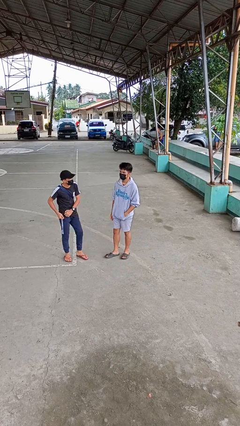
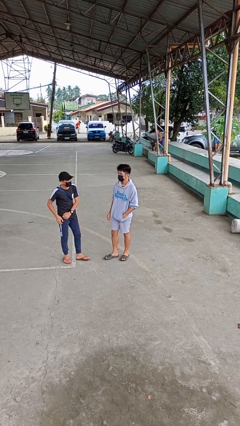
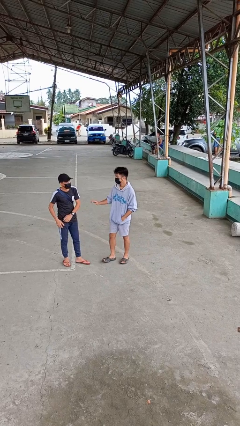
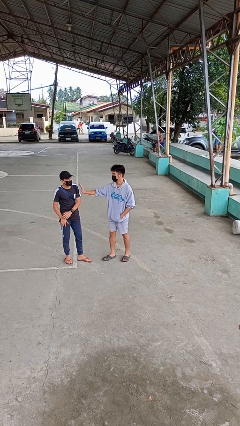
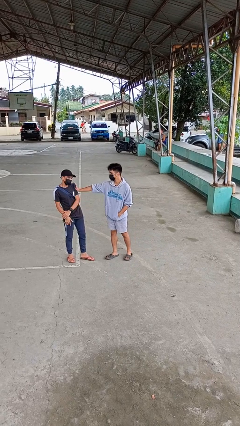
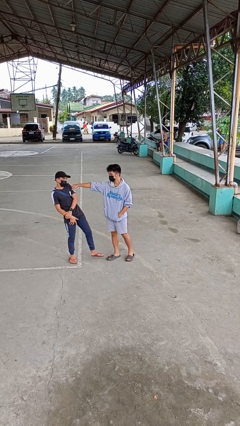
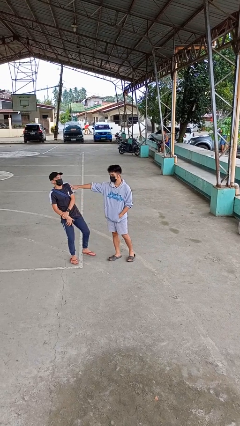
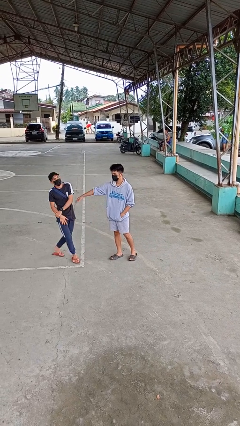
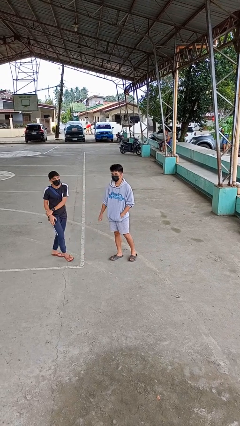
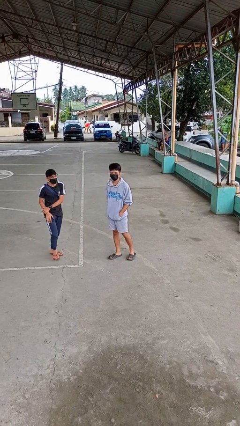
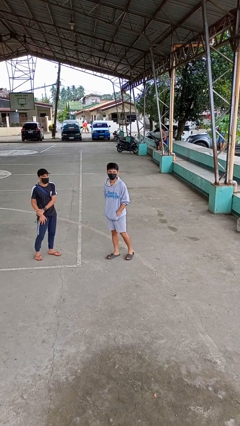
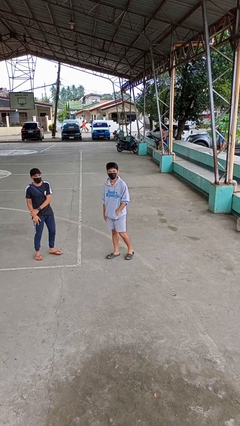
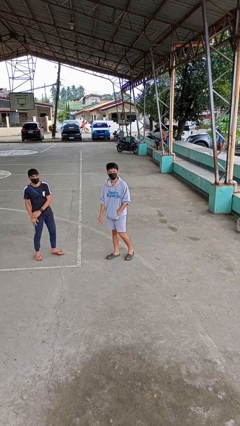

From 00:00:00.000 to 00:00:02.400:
person shoves person

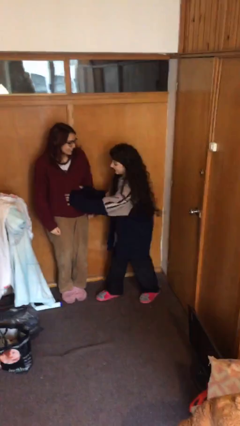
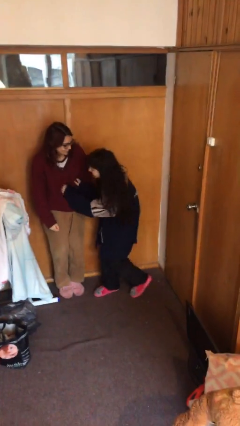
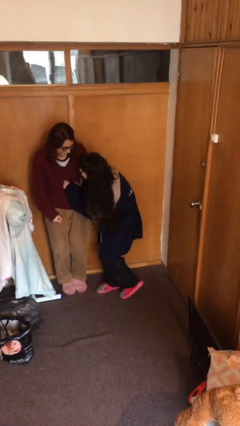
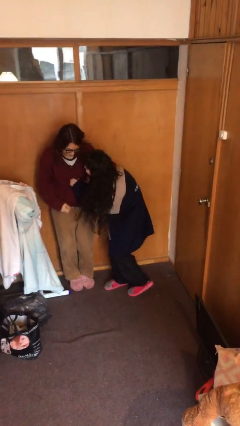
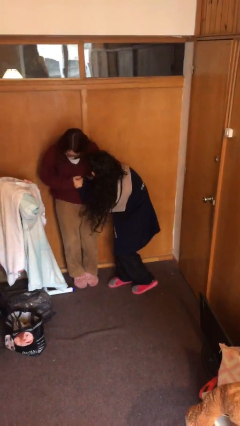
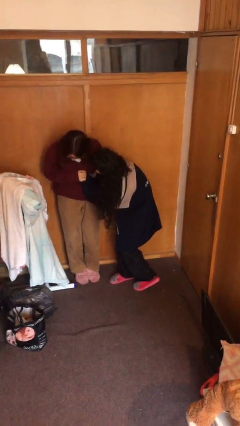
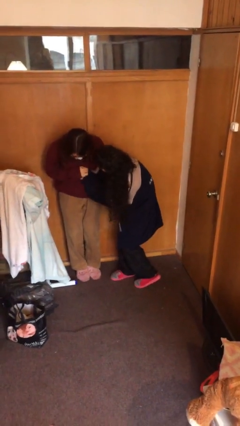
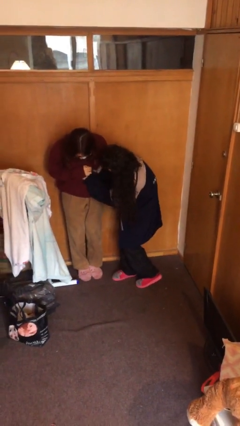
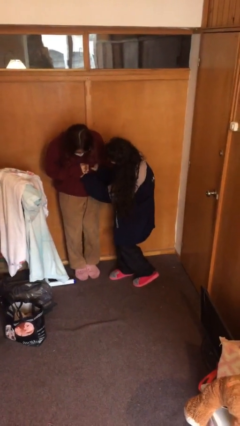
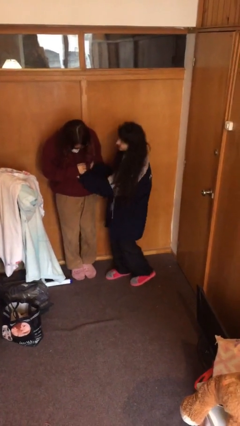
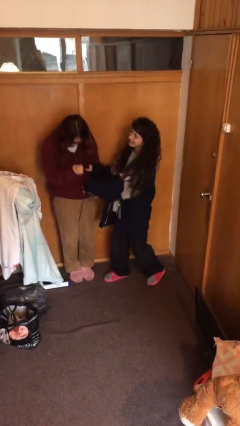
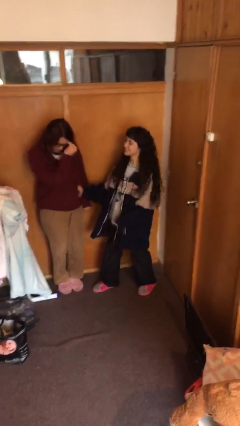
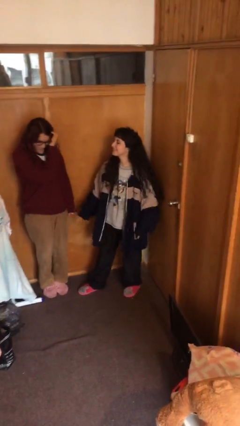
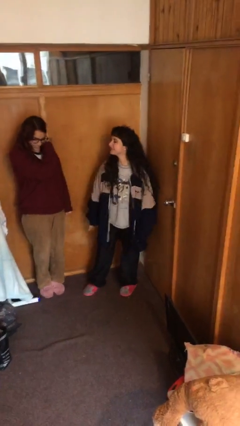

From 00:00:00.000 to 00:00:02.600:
person tickles person

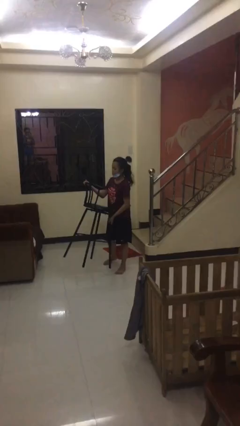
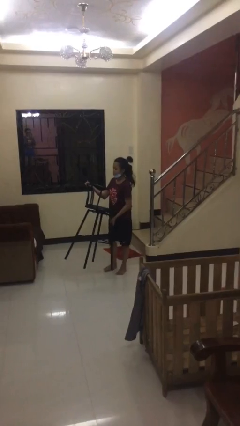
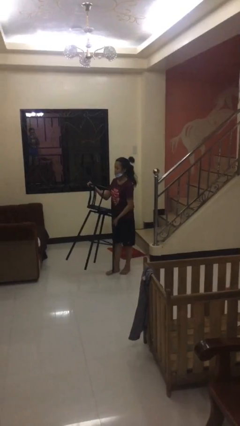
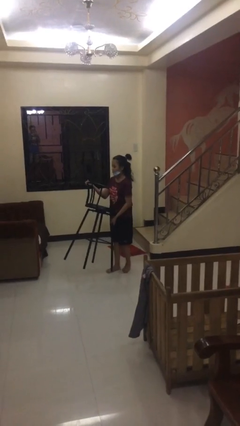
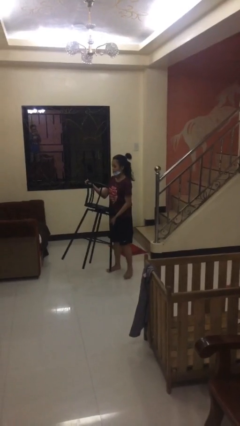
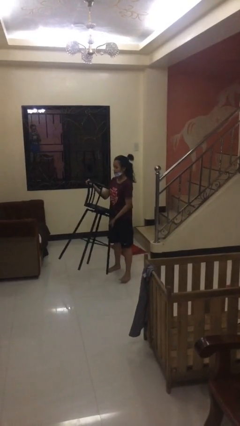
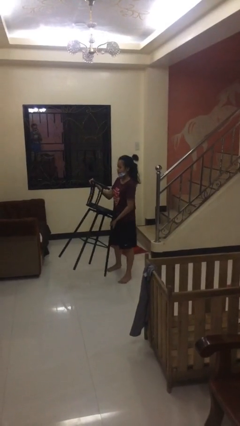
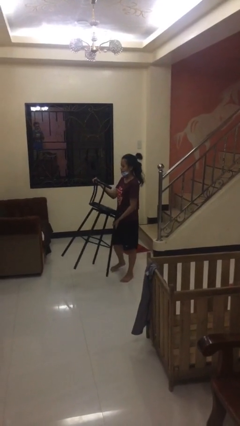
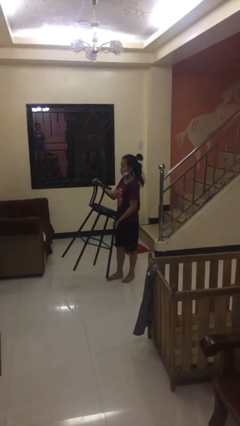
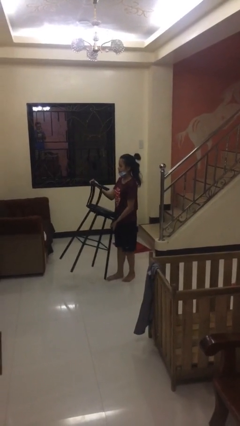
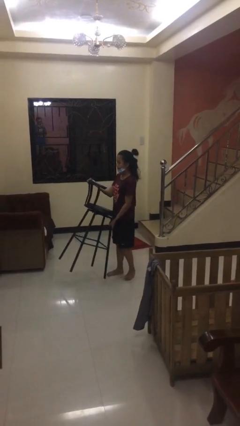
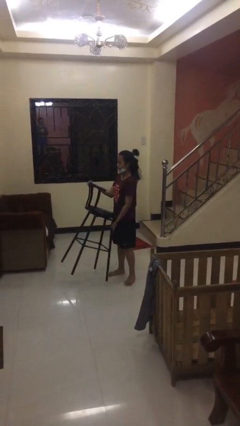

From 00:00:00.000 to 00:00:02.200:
person carries heavy object

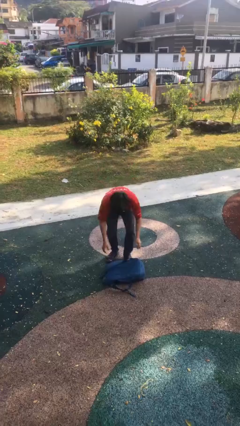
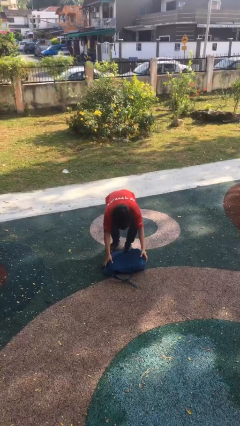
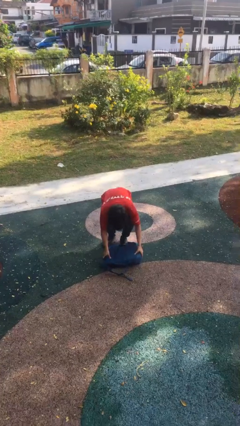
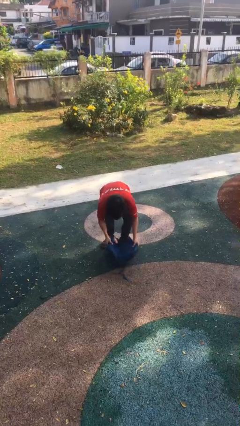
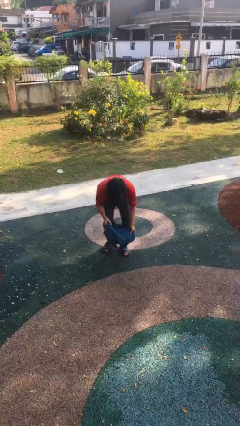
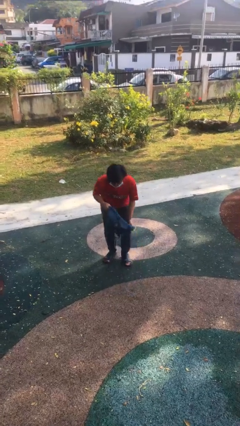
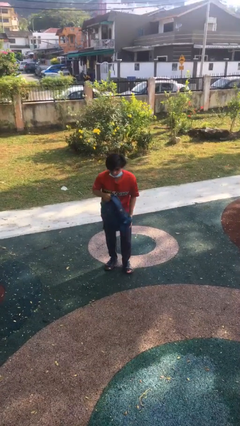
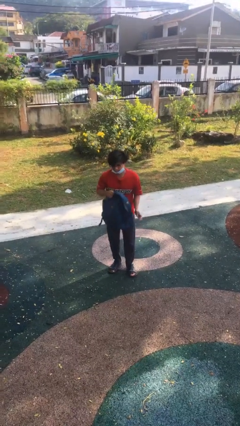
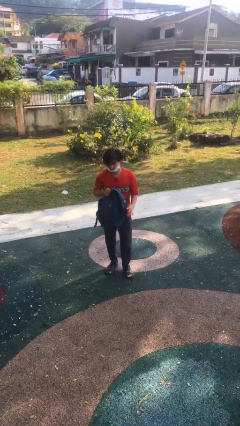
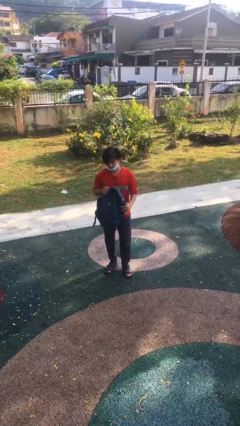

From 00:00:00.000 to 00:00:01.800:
person picks up object from floor

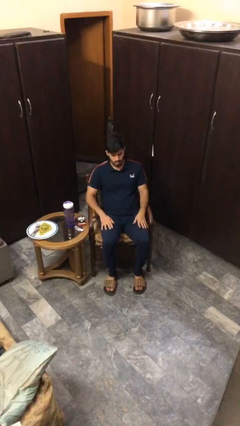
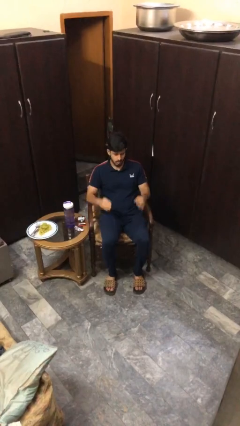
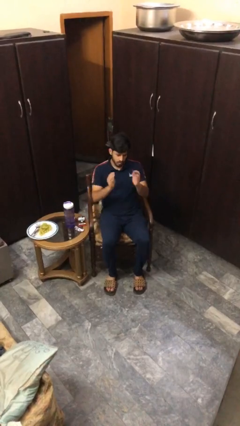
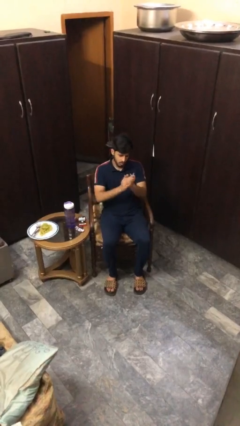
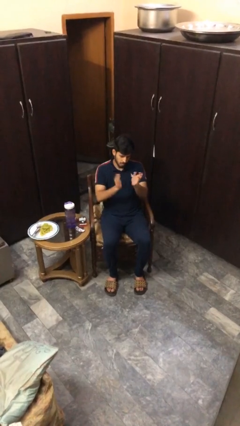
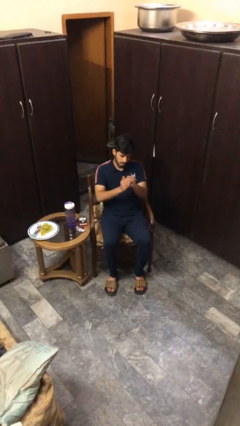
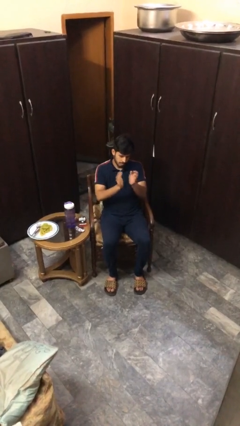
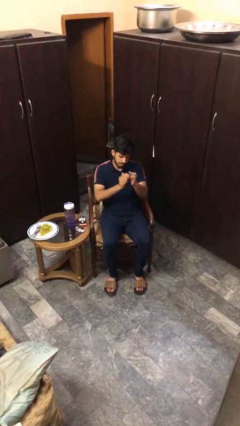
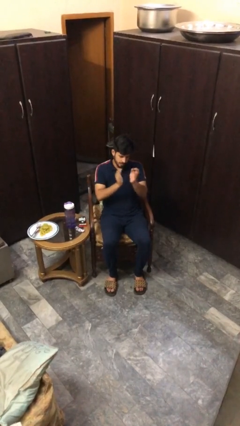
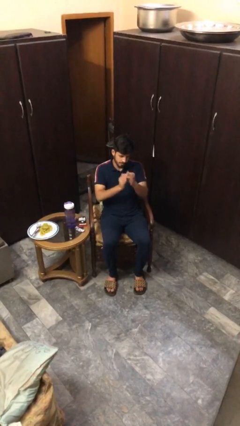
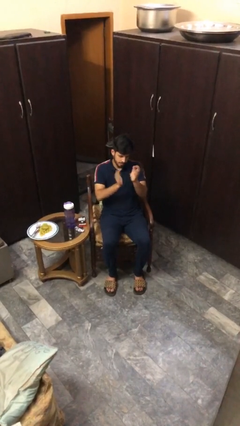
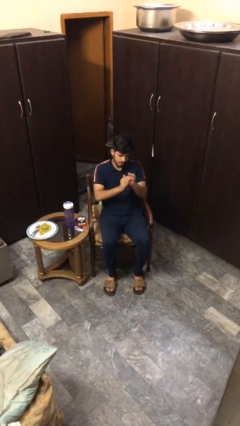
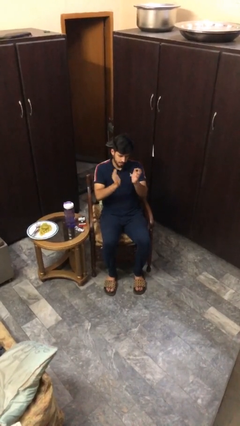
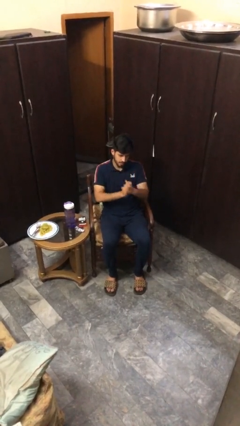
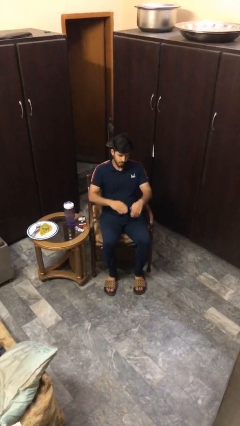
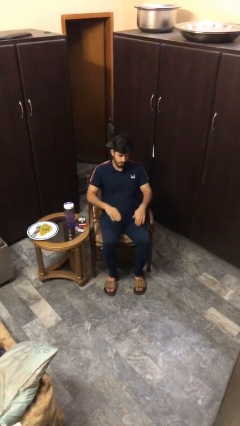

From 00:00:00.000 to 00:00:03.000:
person claps hands

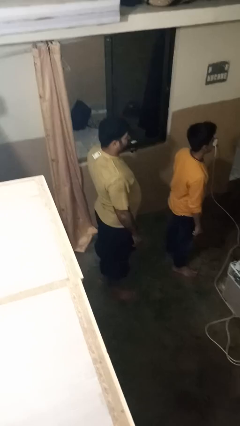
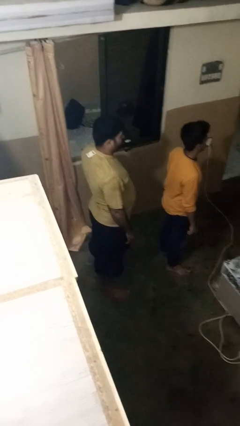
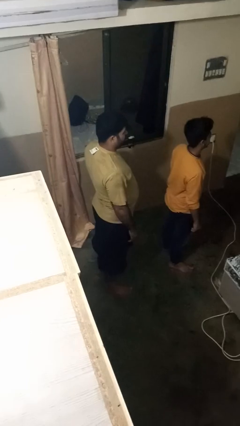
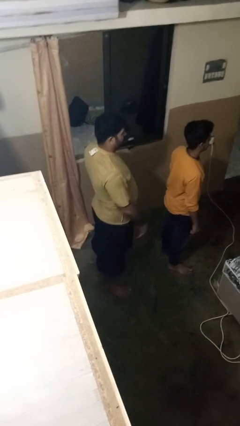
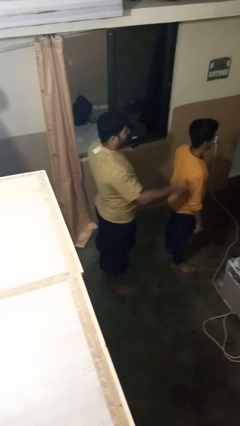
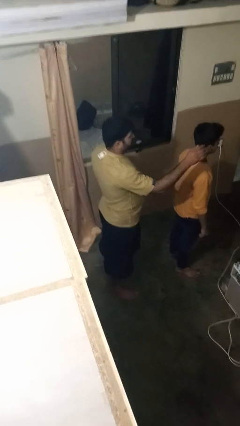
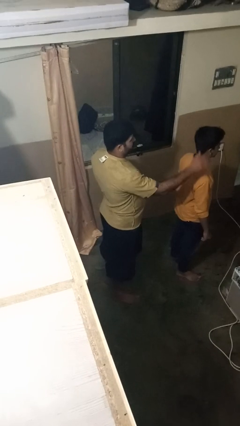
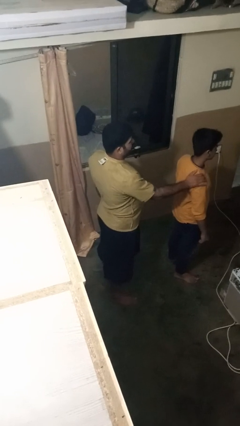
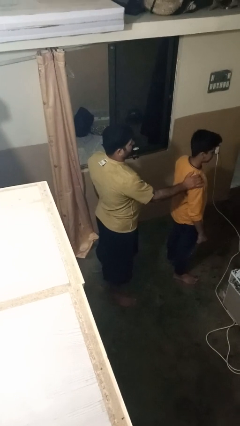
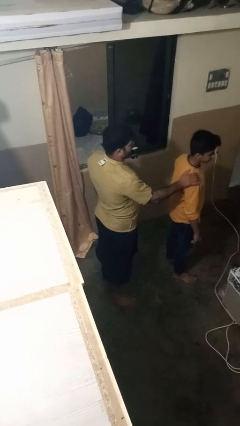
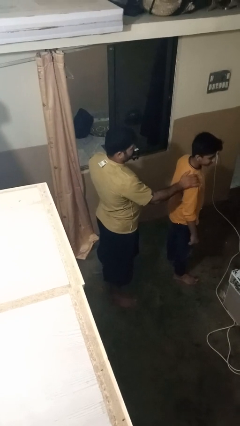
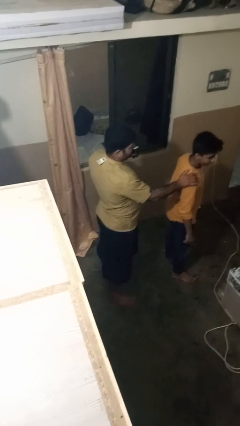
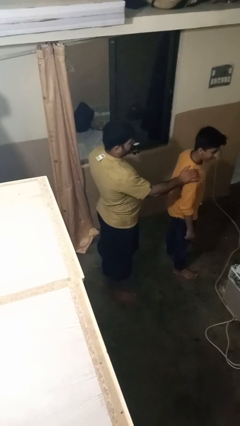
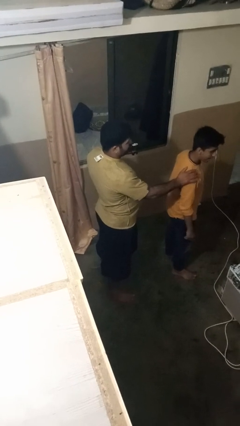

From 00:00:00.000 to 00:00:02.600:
person waves at person

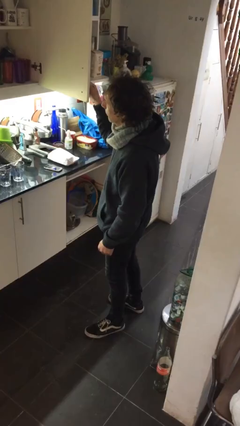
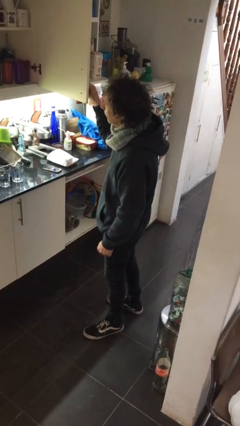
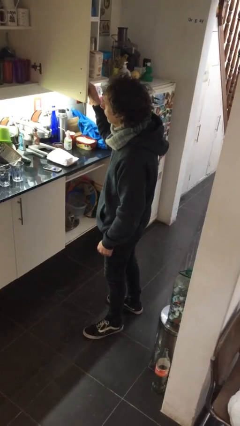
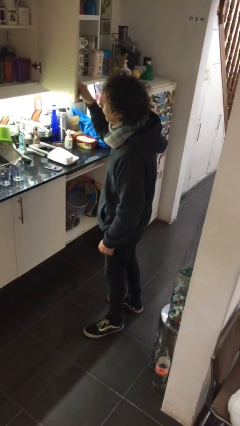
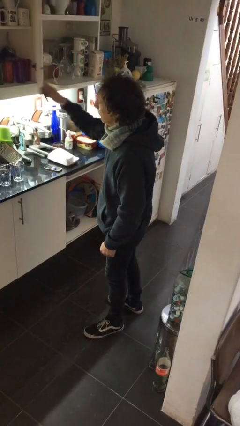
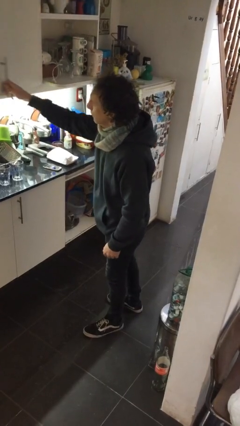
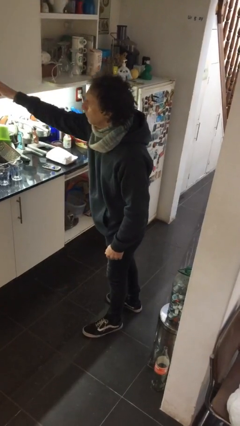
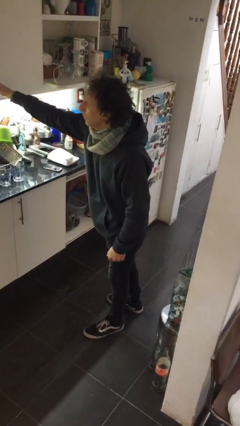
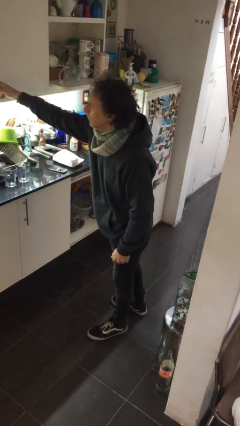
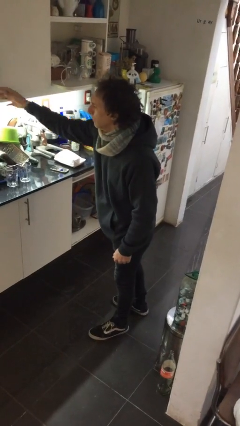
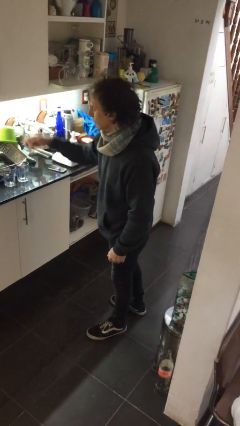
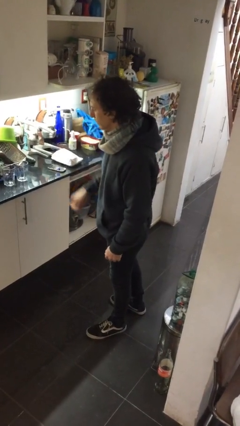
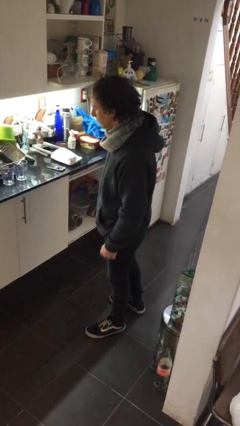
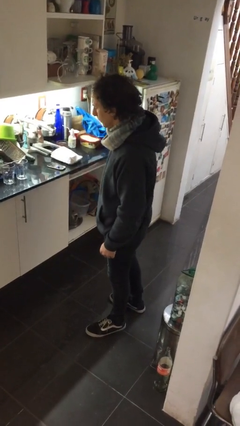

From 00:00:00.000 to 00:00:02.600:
person closes cabinet

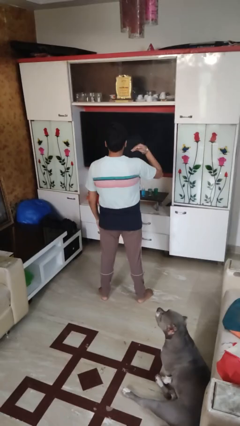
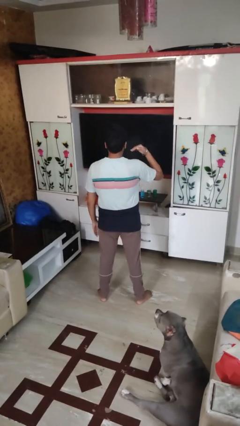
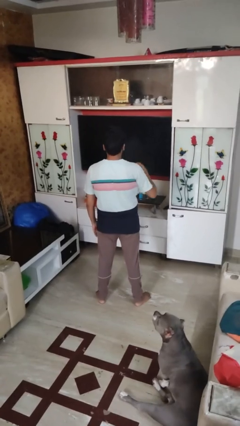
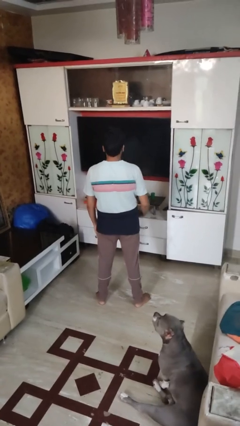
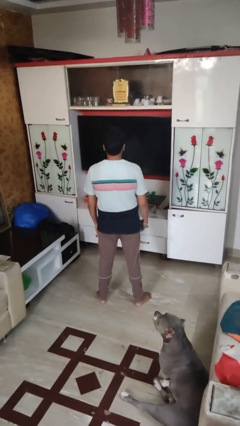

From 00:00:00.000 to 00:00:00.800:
person gestures cut
